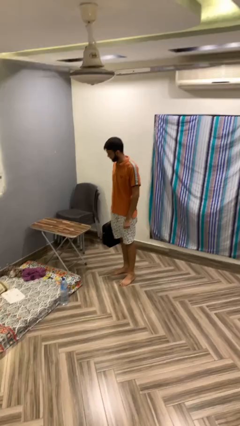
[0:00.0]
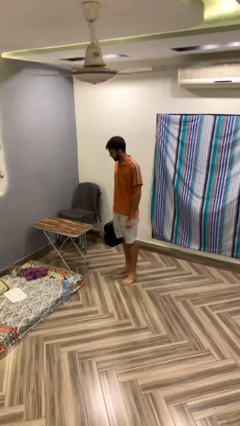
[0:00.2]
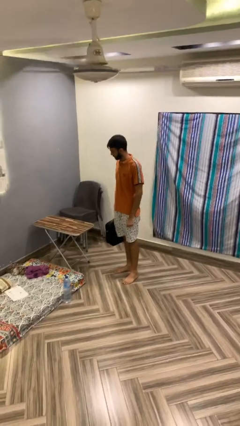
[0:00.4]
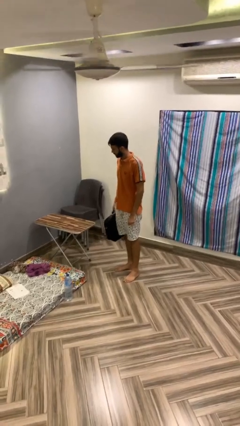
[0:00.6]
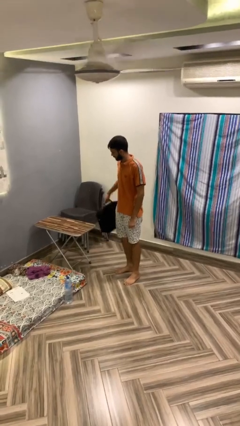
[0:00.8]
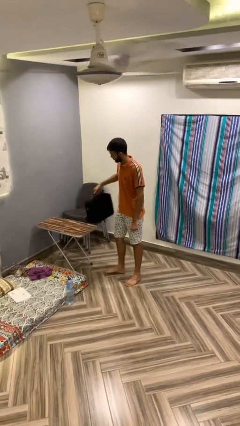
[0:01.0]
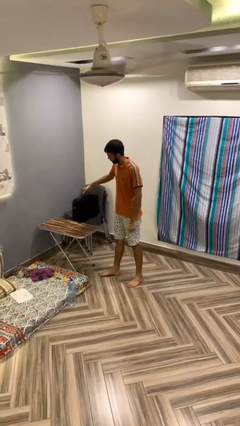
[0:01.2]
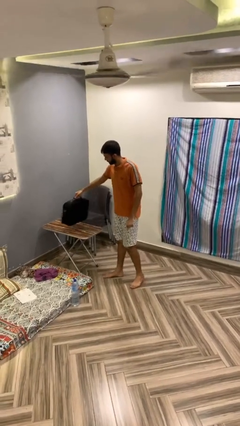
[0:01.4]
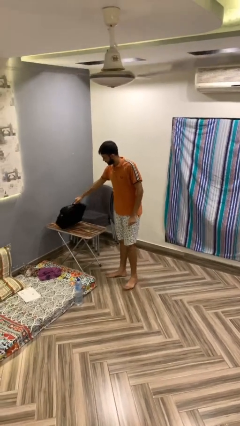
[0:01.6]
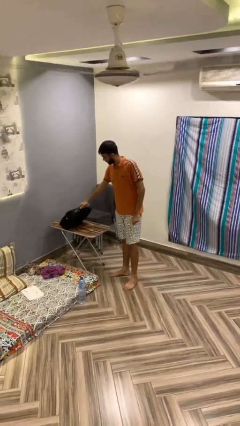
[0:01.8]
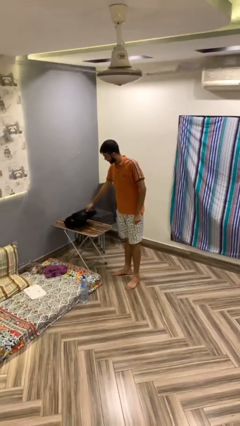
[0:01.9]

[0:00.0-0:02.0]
person puts down object on table

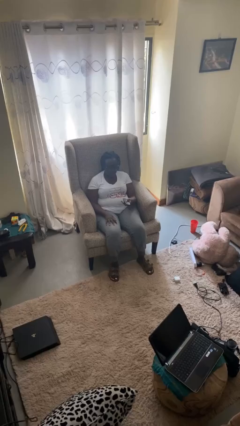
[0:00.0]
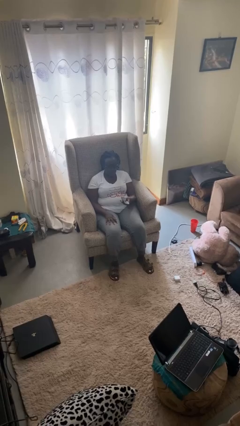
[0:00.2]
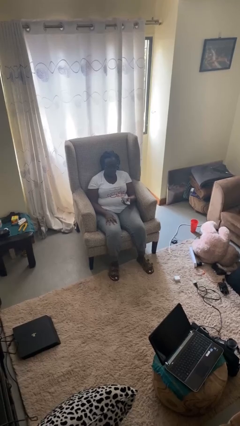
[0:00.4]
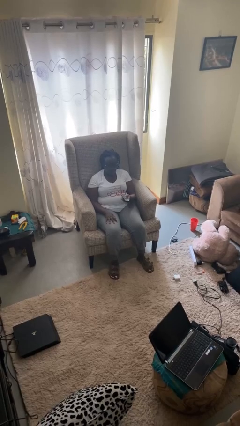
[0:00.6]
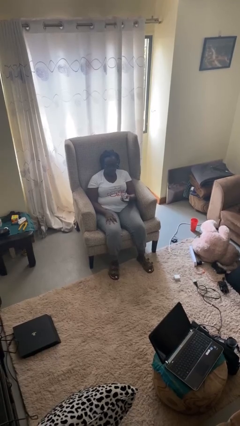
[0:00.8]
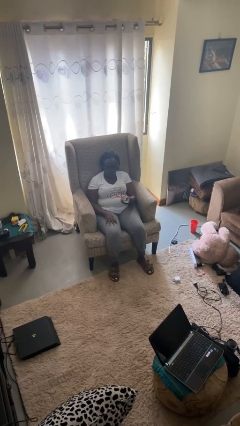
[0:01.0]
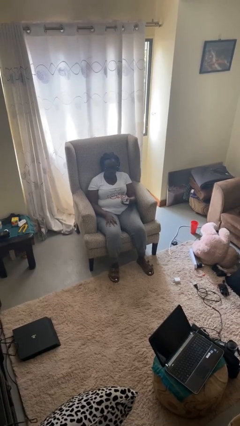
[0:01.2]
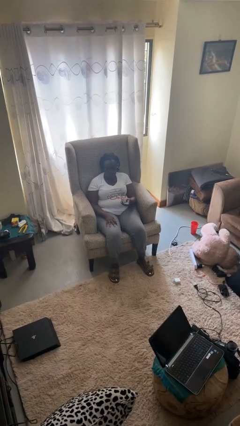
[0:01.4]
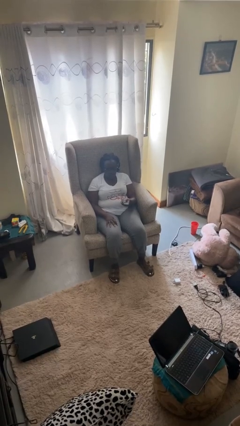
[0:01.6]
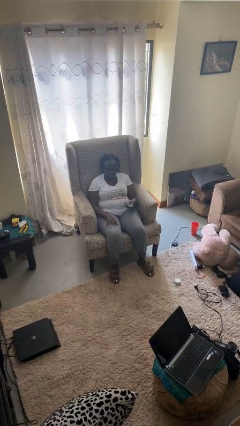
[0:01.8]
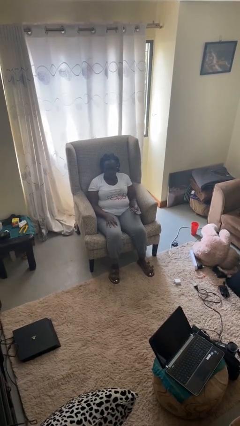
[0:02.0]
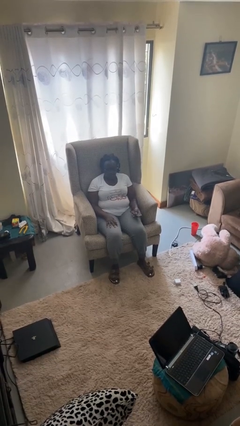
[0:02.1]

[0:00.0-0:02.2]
person uses television remote

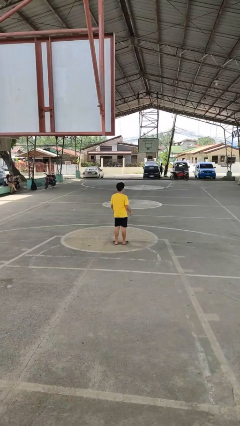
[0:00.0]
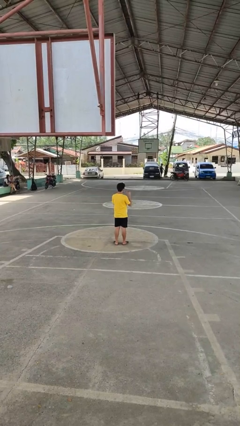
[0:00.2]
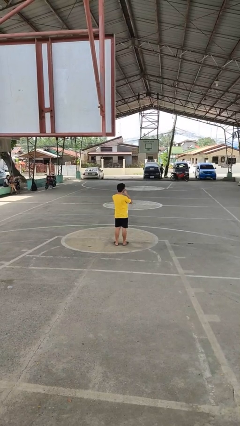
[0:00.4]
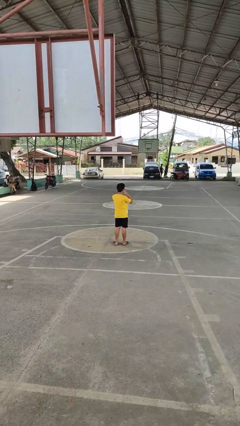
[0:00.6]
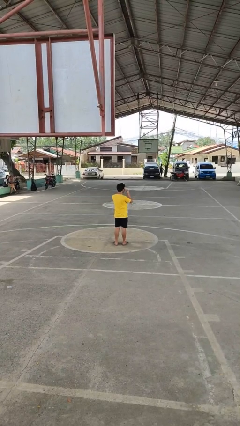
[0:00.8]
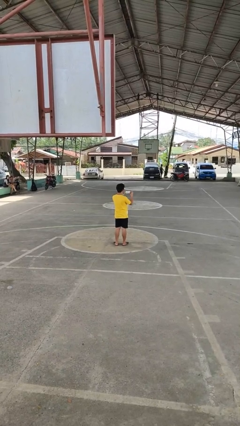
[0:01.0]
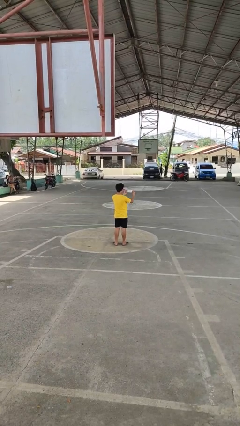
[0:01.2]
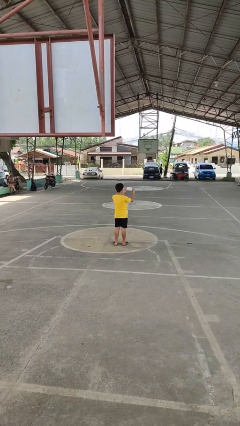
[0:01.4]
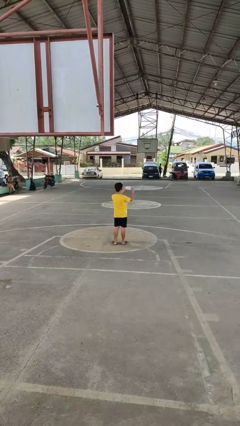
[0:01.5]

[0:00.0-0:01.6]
person takes off facemask

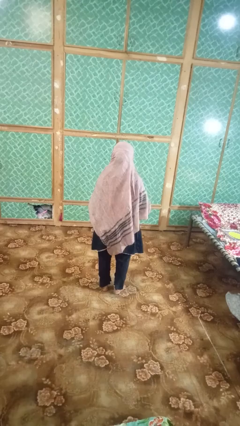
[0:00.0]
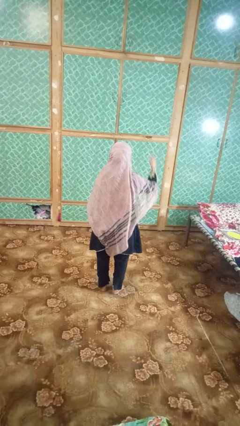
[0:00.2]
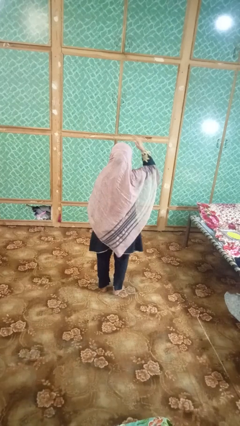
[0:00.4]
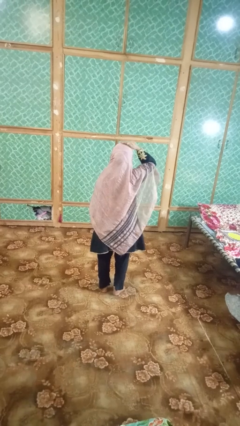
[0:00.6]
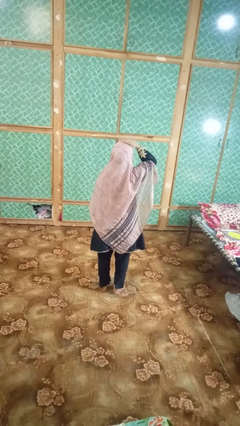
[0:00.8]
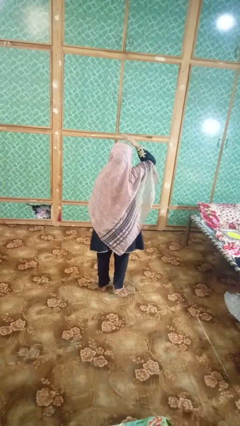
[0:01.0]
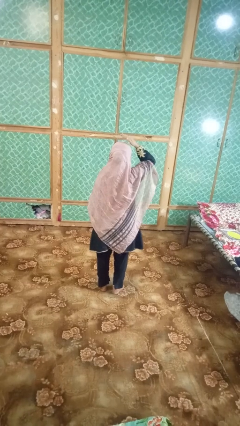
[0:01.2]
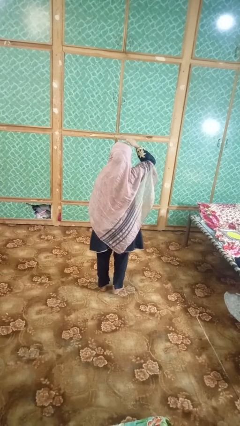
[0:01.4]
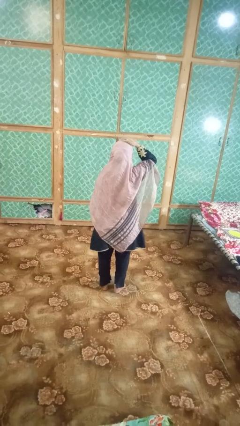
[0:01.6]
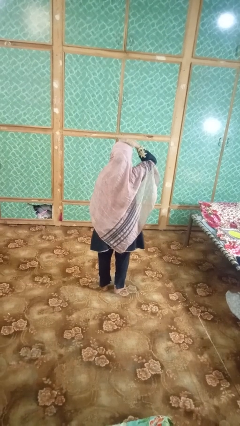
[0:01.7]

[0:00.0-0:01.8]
person pats head

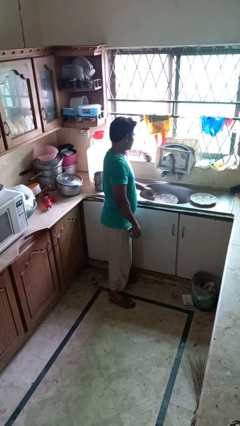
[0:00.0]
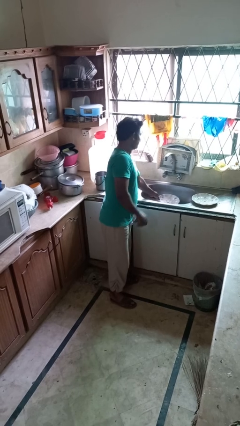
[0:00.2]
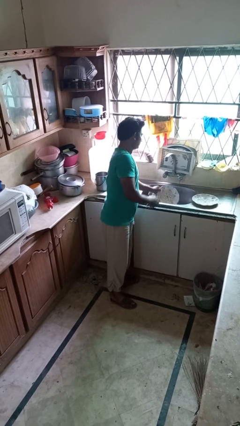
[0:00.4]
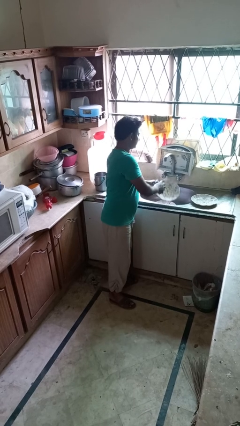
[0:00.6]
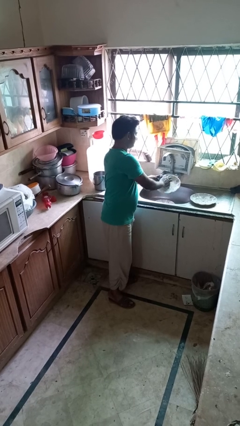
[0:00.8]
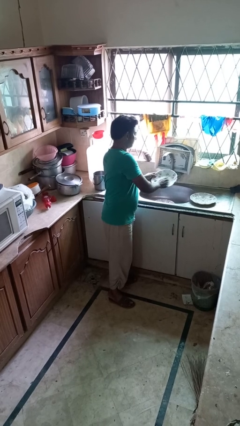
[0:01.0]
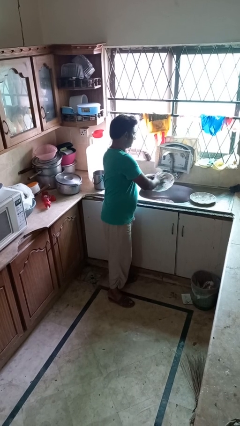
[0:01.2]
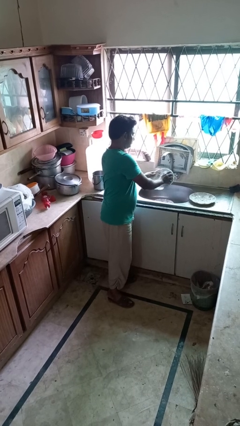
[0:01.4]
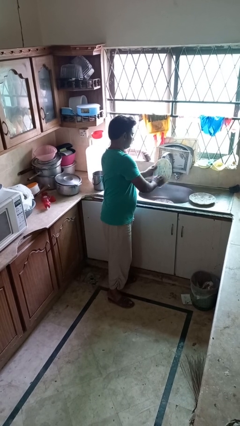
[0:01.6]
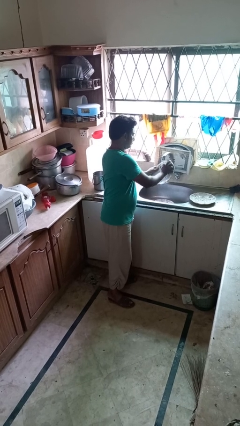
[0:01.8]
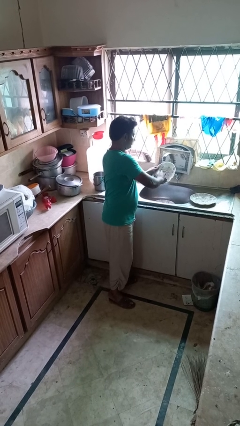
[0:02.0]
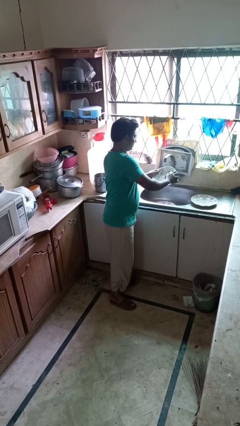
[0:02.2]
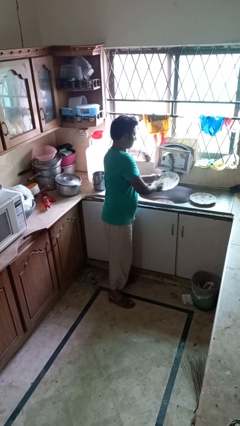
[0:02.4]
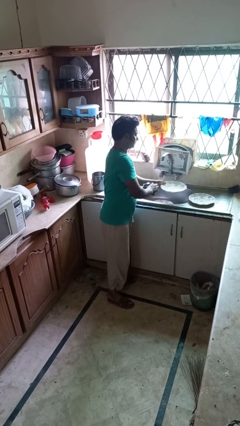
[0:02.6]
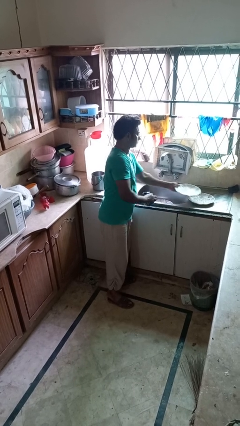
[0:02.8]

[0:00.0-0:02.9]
person dries dish

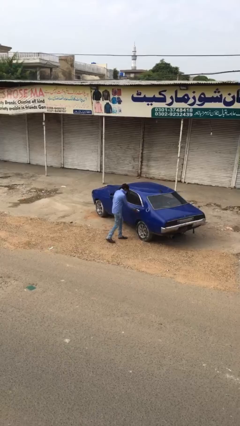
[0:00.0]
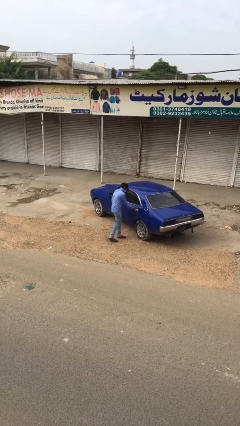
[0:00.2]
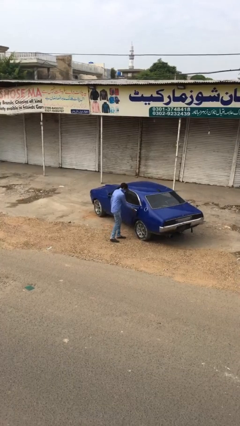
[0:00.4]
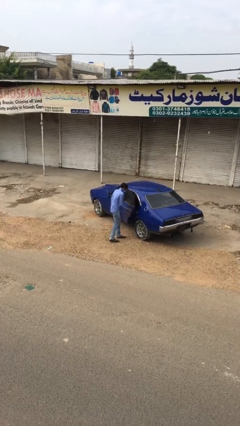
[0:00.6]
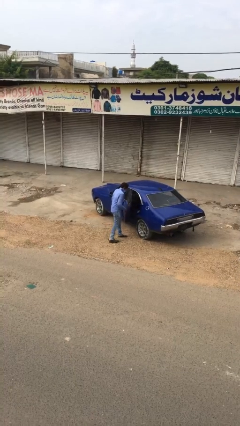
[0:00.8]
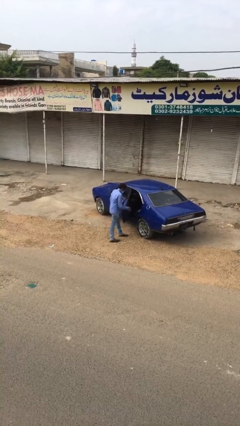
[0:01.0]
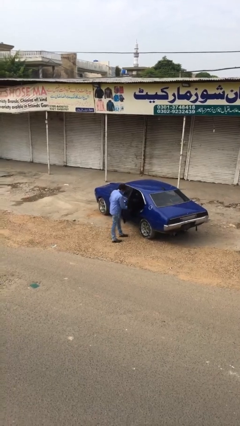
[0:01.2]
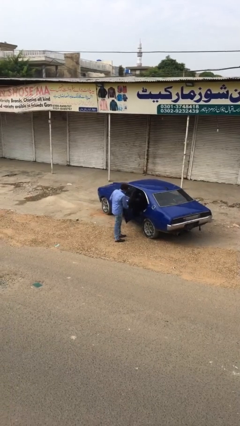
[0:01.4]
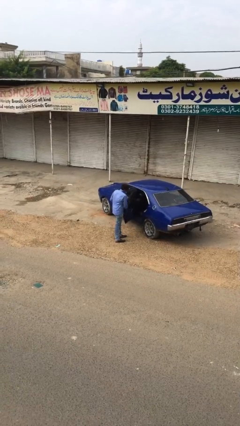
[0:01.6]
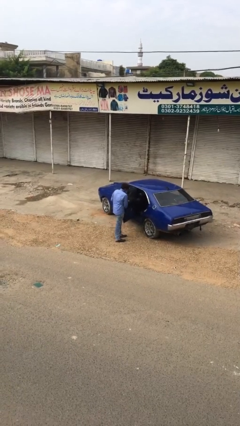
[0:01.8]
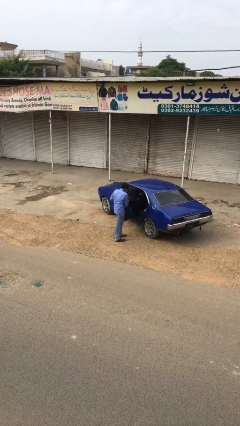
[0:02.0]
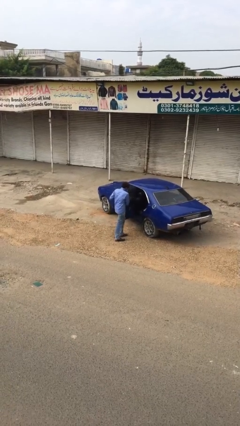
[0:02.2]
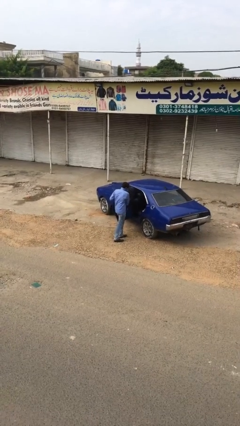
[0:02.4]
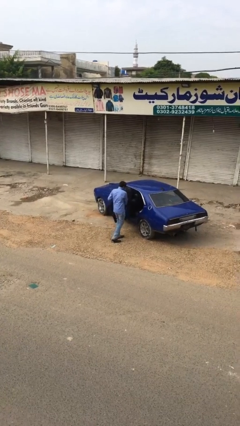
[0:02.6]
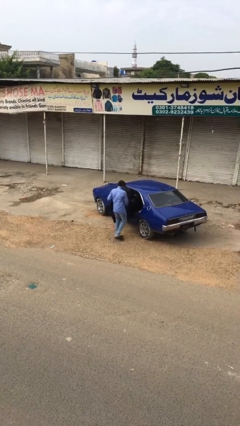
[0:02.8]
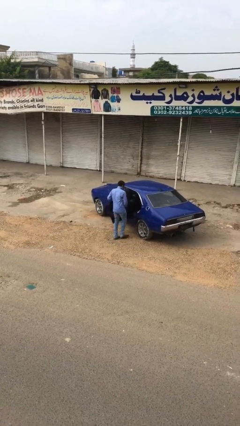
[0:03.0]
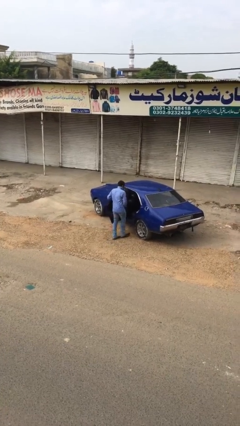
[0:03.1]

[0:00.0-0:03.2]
person opens car door

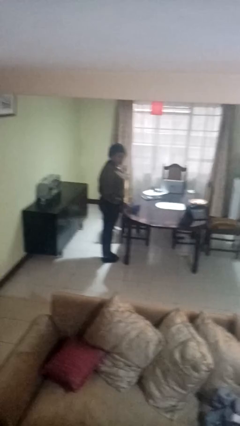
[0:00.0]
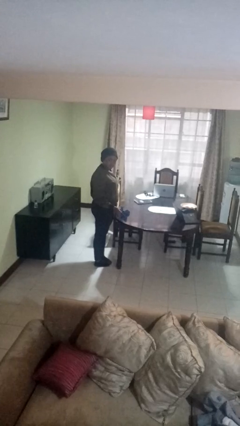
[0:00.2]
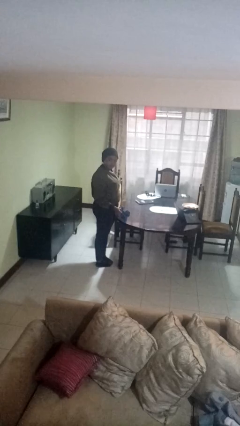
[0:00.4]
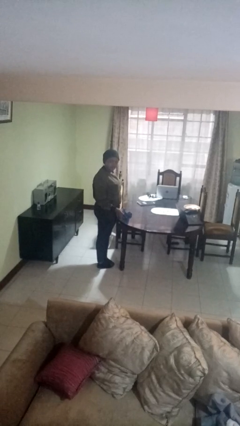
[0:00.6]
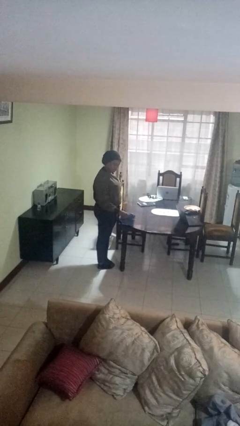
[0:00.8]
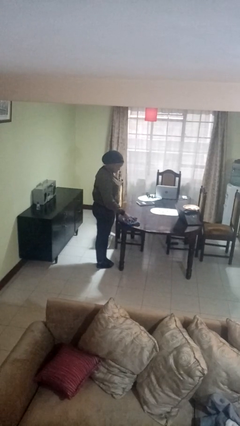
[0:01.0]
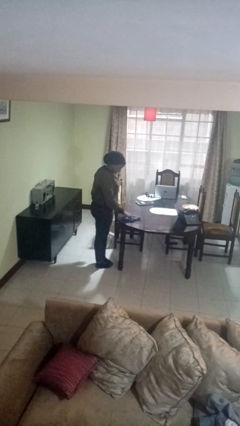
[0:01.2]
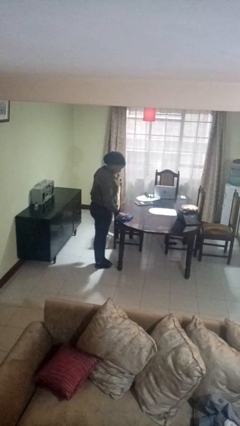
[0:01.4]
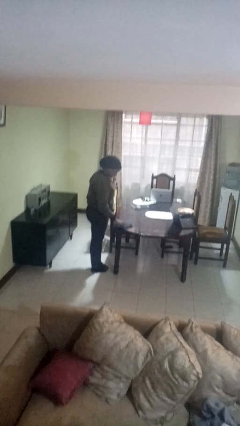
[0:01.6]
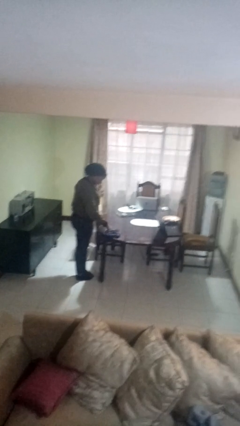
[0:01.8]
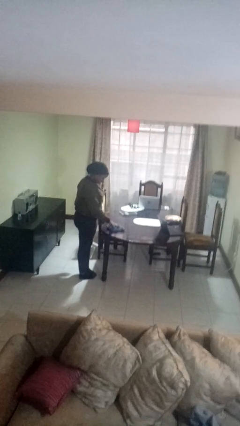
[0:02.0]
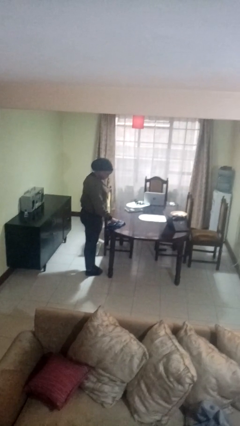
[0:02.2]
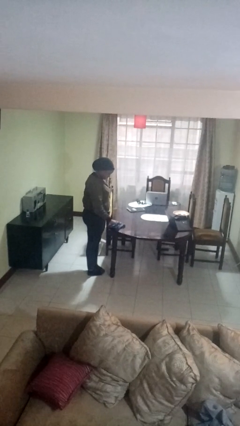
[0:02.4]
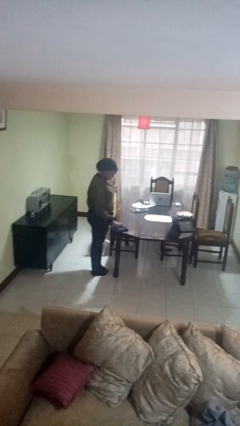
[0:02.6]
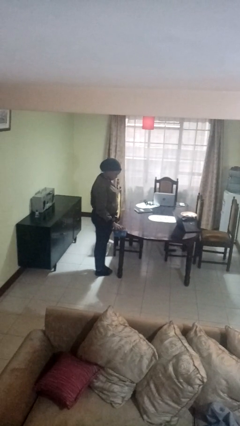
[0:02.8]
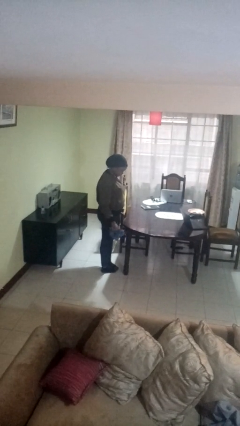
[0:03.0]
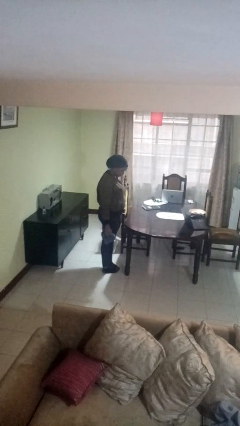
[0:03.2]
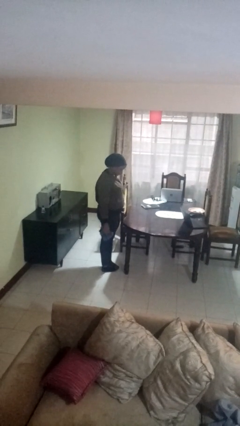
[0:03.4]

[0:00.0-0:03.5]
person cleans table with rag

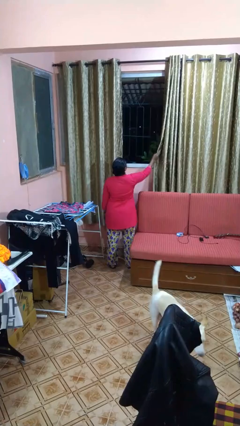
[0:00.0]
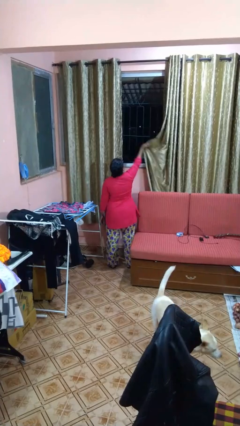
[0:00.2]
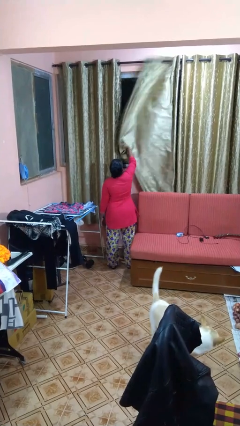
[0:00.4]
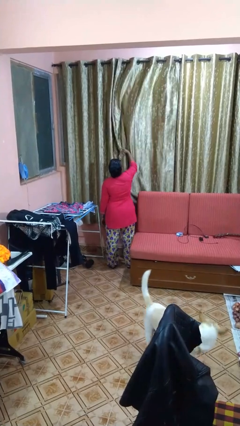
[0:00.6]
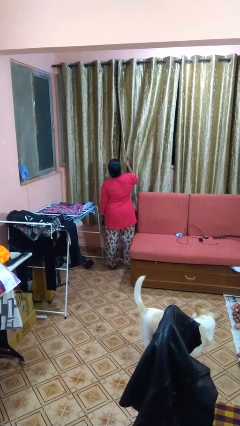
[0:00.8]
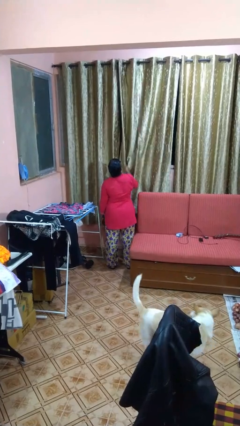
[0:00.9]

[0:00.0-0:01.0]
person closes curtains
